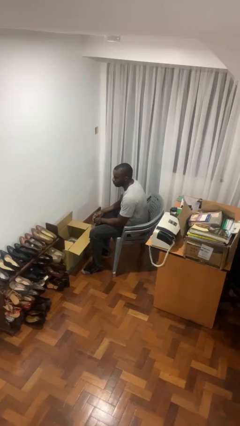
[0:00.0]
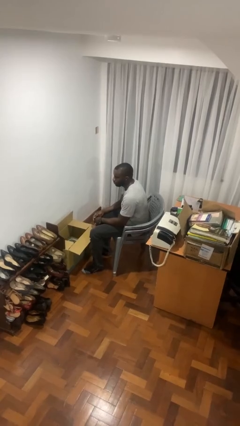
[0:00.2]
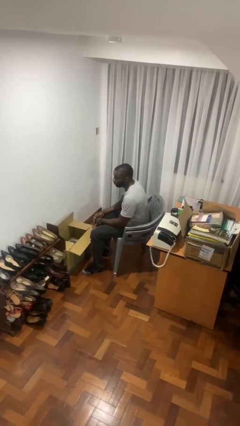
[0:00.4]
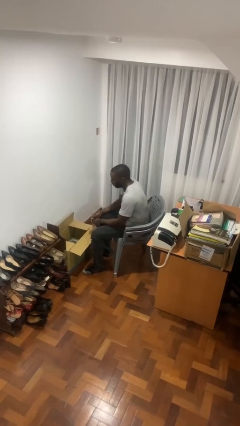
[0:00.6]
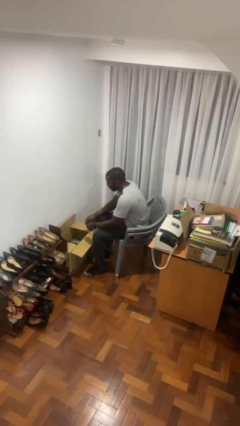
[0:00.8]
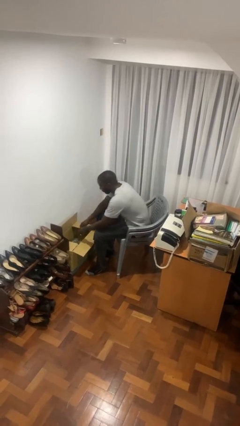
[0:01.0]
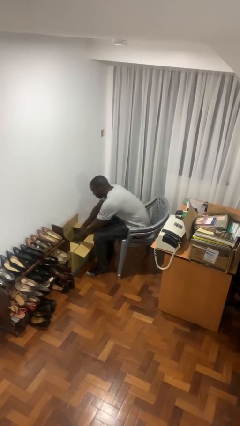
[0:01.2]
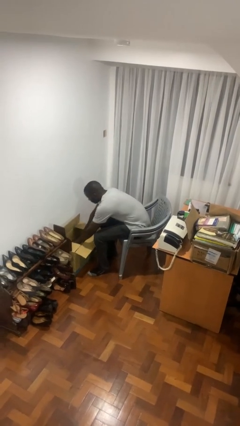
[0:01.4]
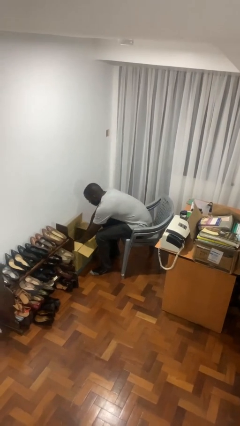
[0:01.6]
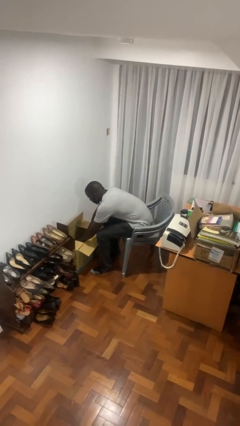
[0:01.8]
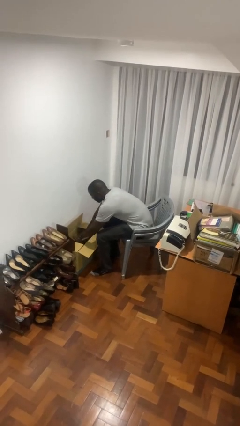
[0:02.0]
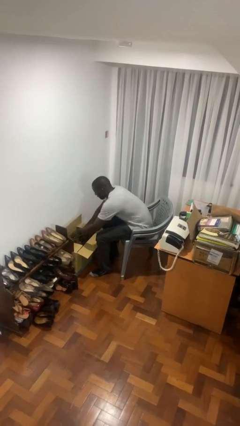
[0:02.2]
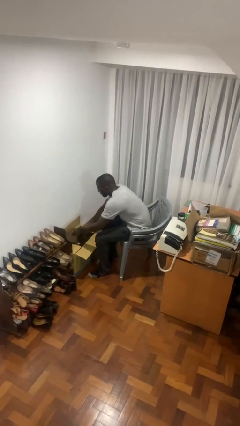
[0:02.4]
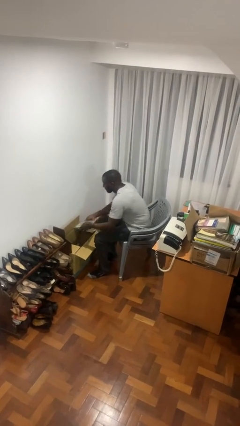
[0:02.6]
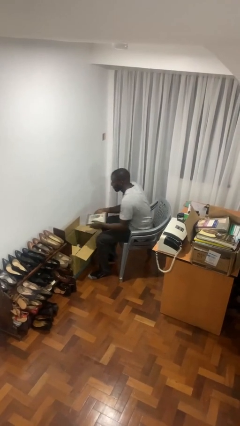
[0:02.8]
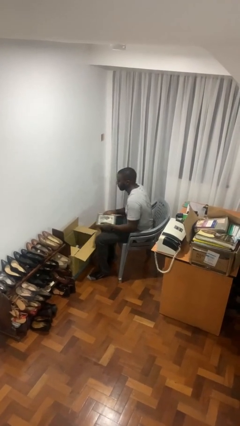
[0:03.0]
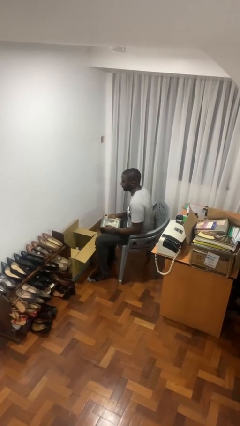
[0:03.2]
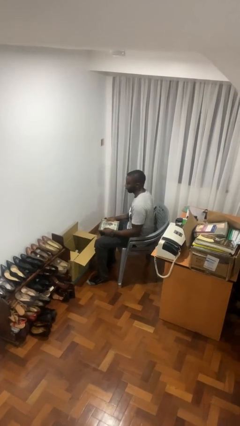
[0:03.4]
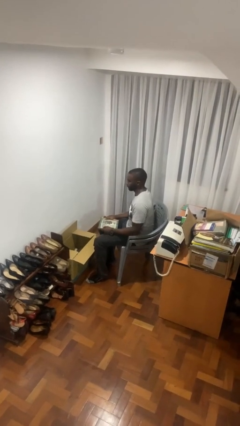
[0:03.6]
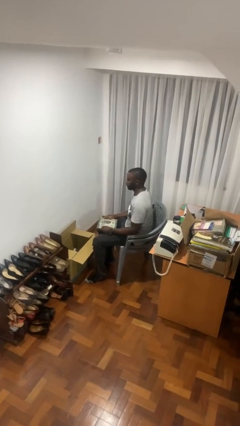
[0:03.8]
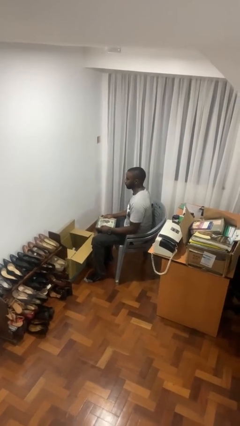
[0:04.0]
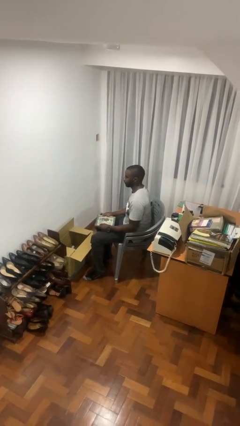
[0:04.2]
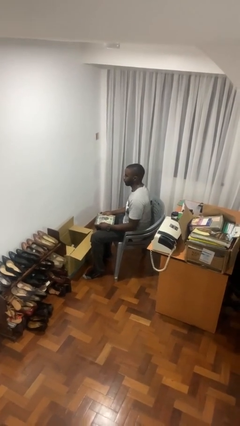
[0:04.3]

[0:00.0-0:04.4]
person takes object from box

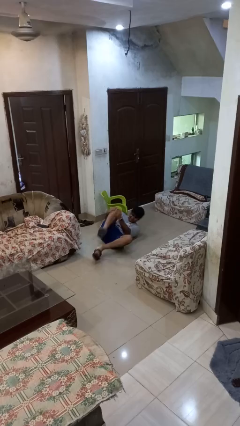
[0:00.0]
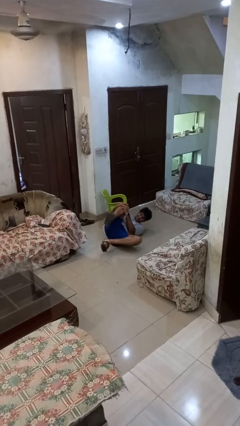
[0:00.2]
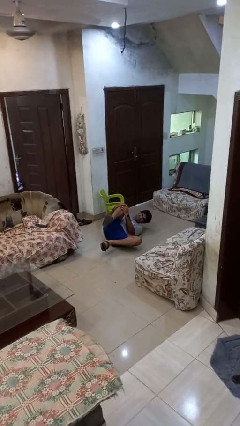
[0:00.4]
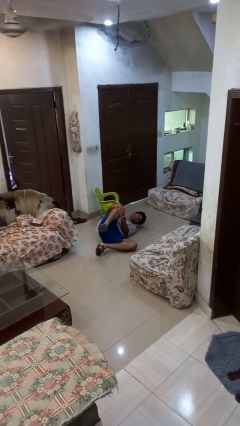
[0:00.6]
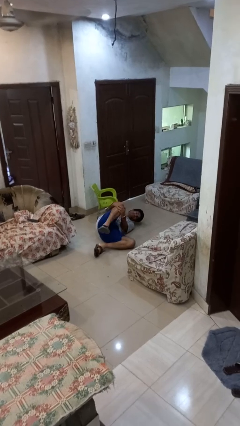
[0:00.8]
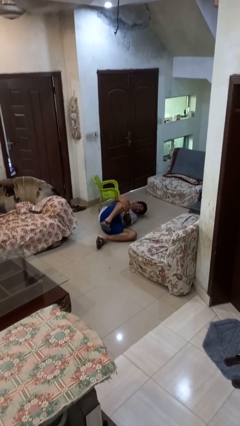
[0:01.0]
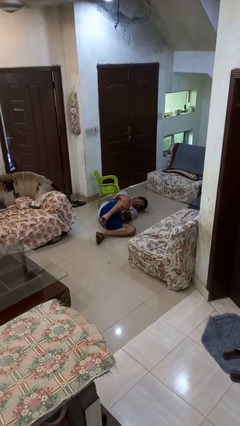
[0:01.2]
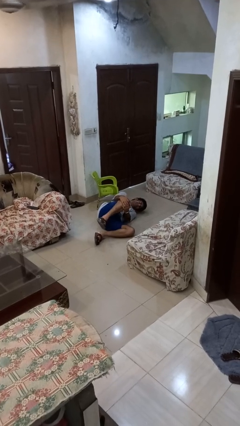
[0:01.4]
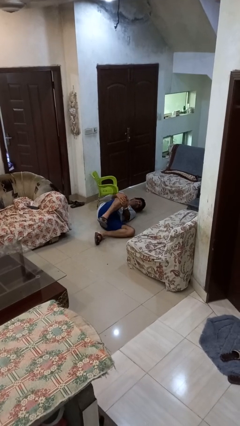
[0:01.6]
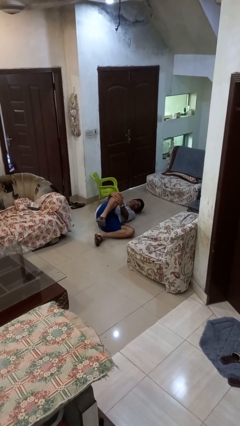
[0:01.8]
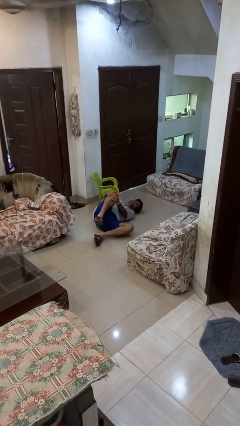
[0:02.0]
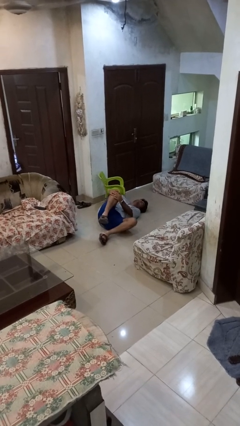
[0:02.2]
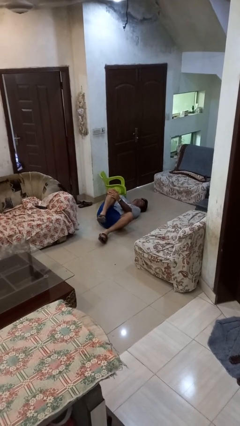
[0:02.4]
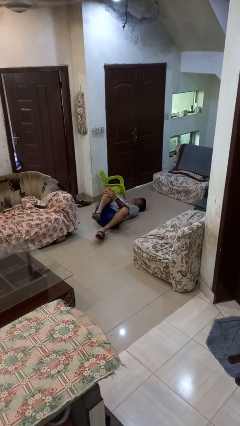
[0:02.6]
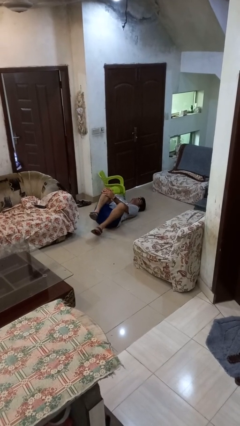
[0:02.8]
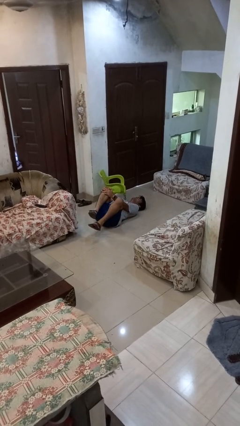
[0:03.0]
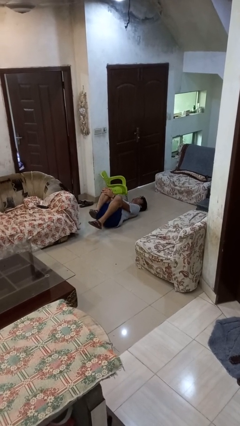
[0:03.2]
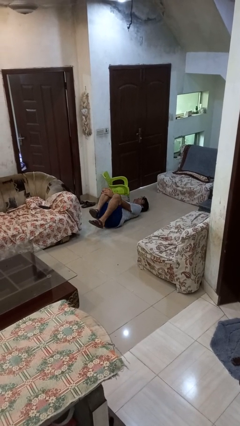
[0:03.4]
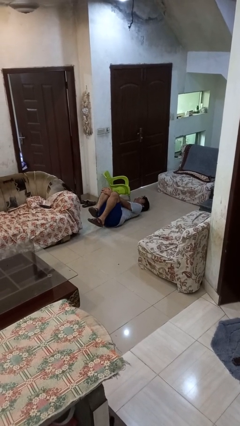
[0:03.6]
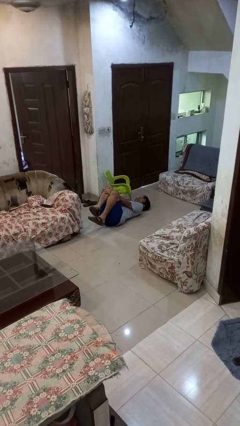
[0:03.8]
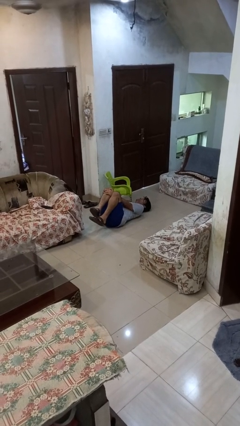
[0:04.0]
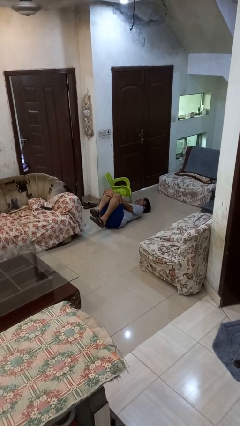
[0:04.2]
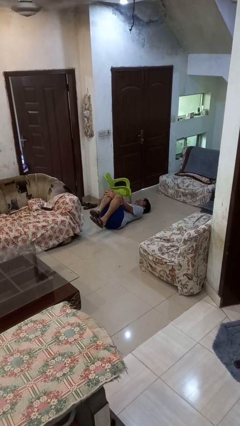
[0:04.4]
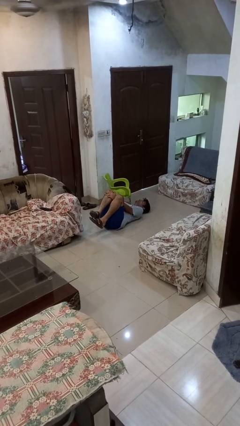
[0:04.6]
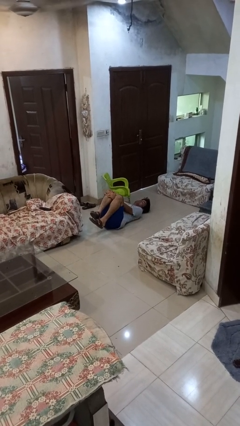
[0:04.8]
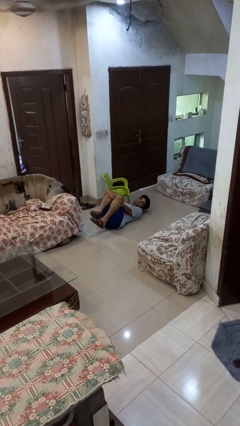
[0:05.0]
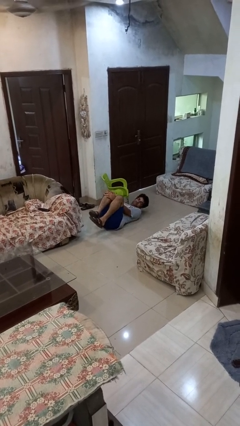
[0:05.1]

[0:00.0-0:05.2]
person lies down on floor

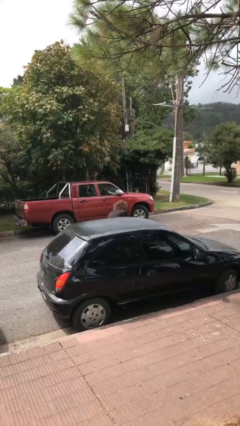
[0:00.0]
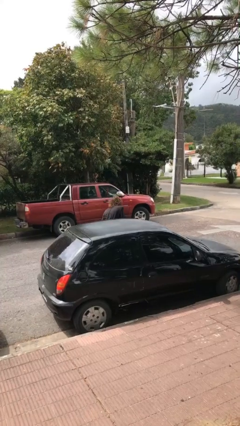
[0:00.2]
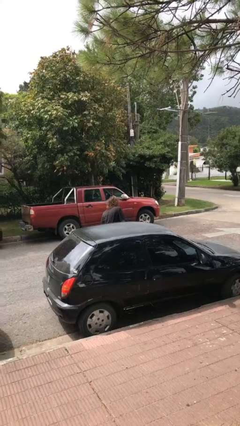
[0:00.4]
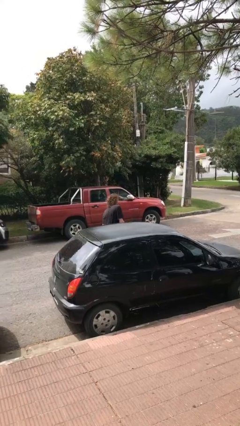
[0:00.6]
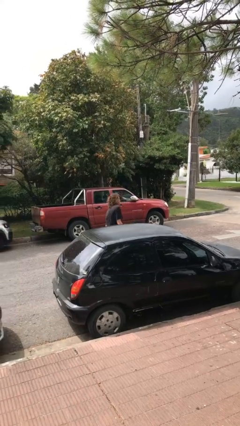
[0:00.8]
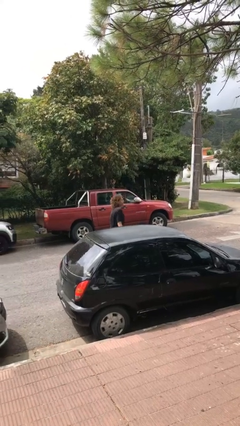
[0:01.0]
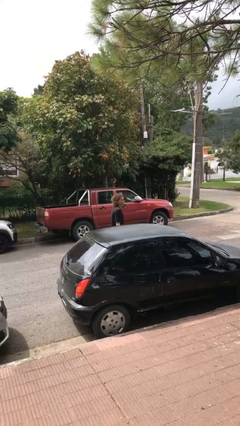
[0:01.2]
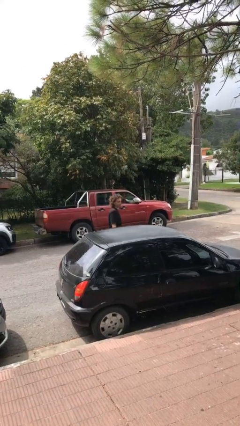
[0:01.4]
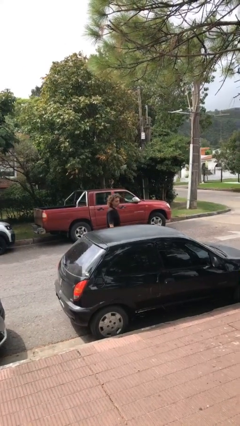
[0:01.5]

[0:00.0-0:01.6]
person exits car

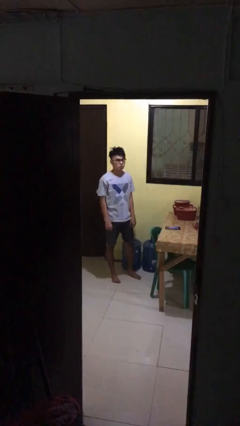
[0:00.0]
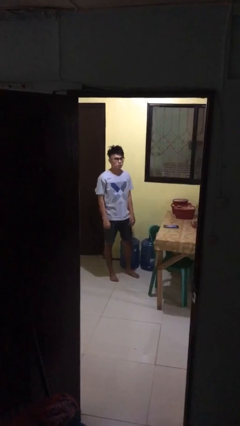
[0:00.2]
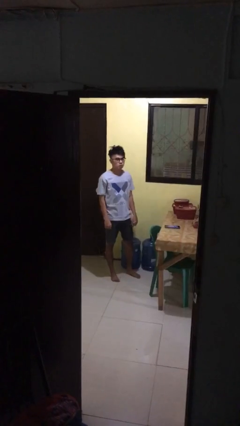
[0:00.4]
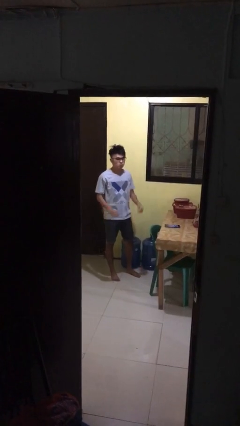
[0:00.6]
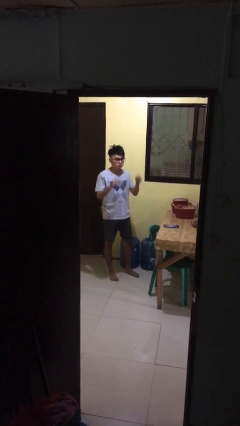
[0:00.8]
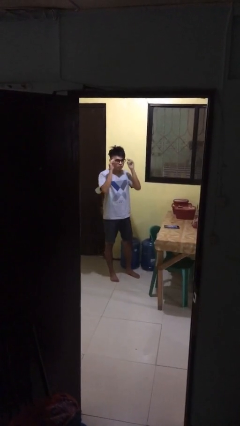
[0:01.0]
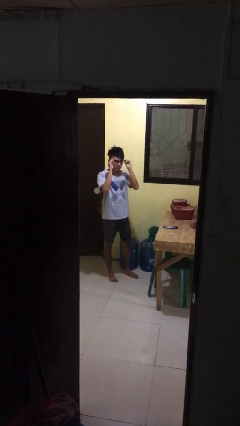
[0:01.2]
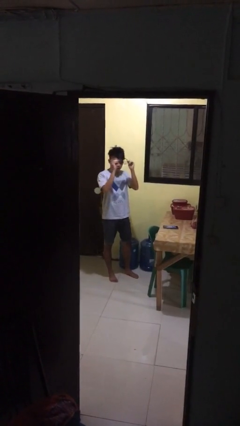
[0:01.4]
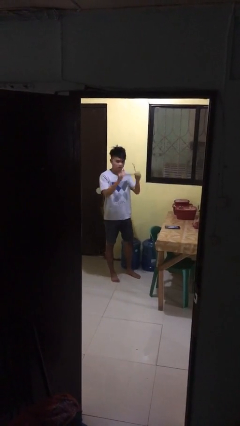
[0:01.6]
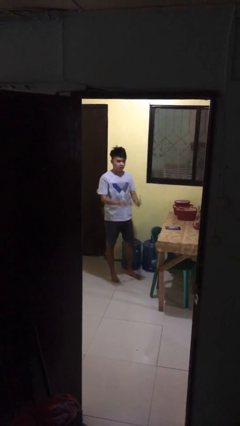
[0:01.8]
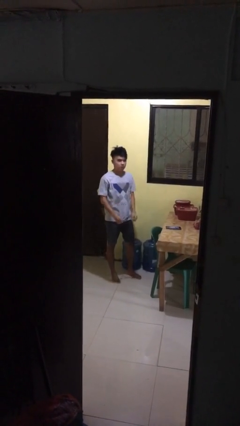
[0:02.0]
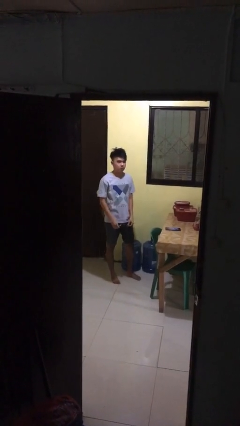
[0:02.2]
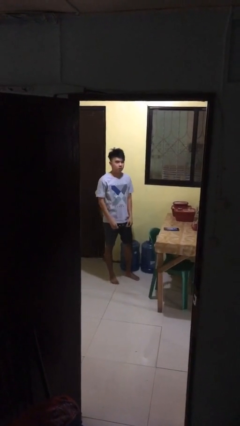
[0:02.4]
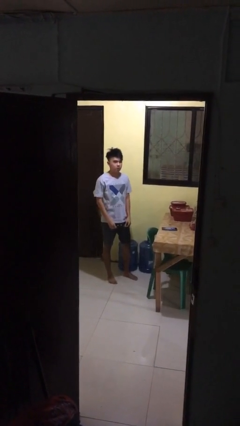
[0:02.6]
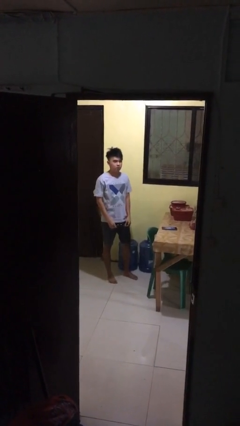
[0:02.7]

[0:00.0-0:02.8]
person takes off glasses

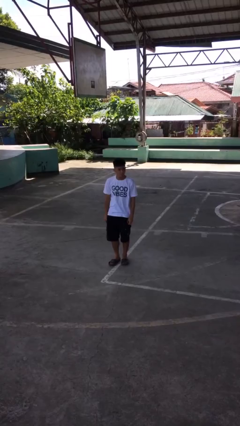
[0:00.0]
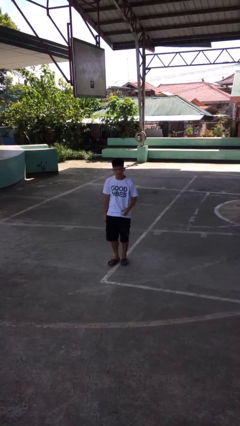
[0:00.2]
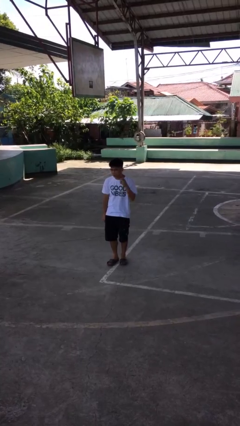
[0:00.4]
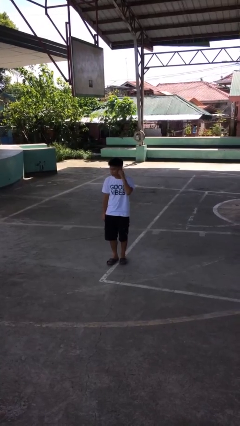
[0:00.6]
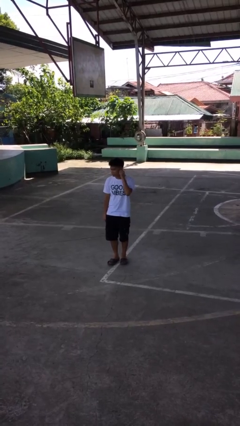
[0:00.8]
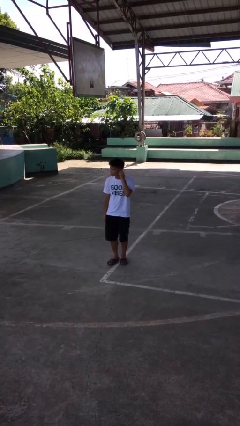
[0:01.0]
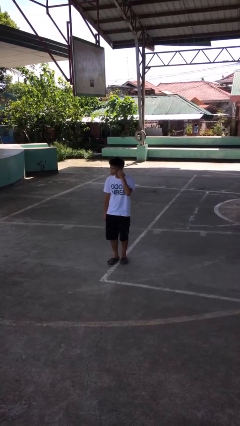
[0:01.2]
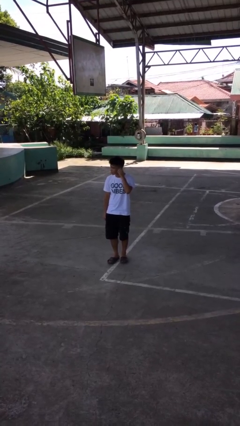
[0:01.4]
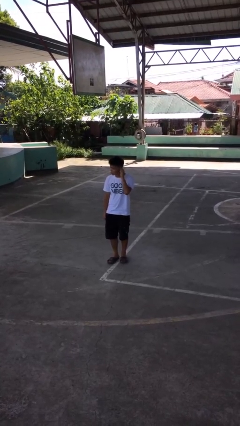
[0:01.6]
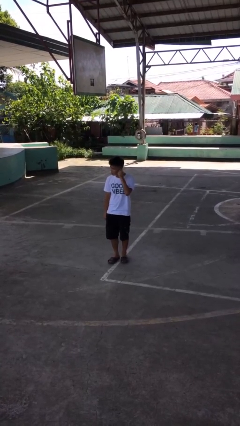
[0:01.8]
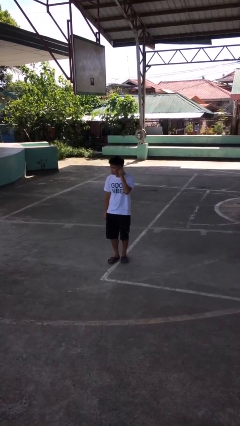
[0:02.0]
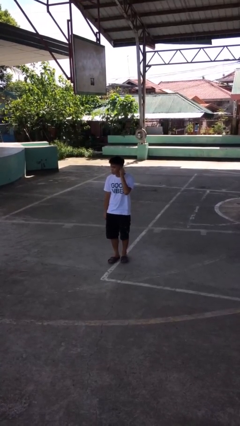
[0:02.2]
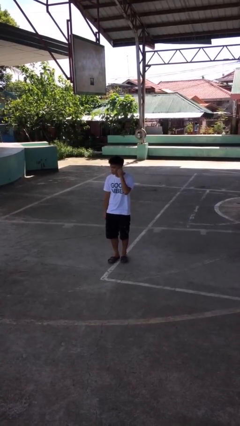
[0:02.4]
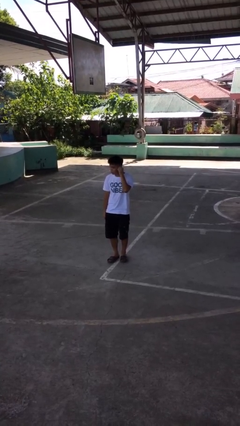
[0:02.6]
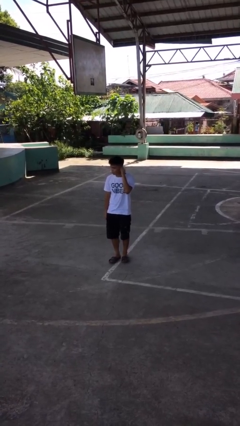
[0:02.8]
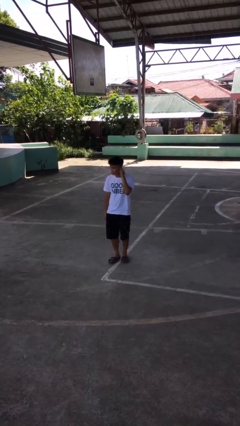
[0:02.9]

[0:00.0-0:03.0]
person touches earlobe

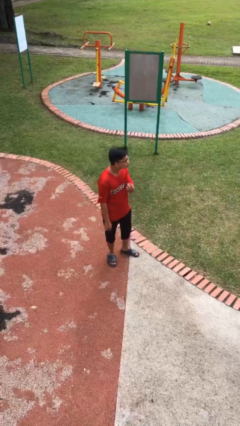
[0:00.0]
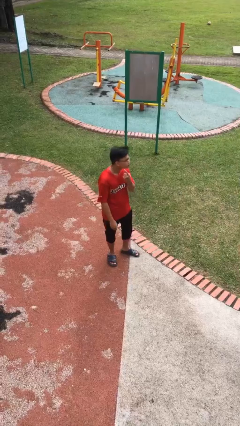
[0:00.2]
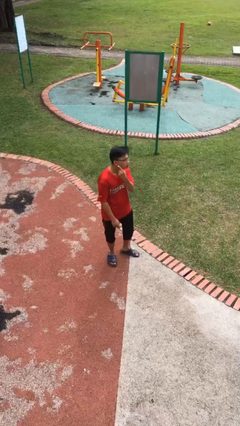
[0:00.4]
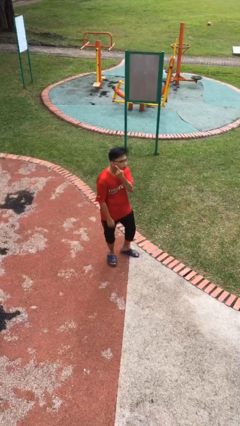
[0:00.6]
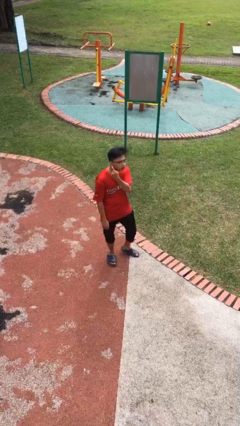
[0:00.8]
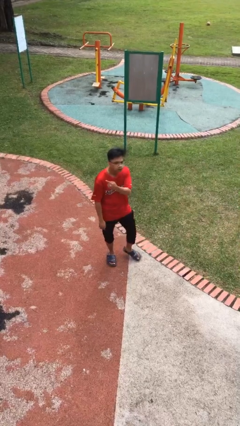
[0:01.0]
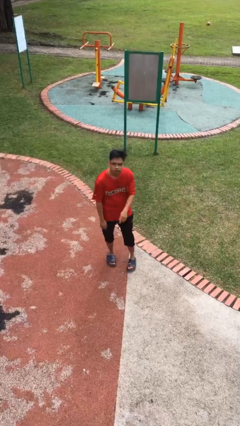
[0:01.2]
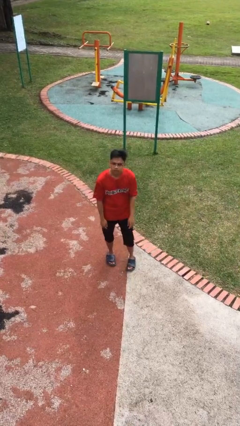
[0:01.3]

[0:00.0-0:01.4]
person gestures listen closely
